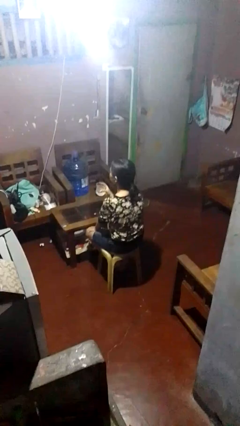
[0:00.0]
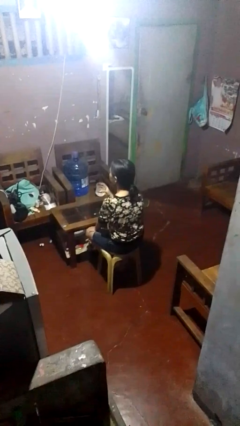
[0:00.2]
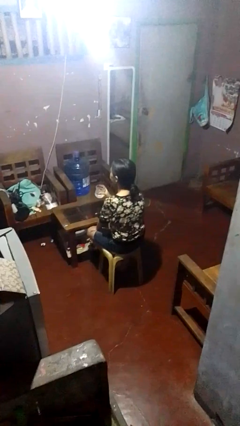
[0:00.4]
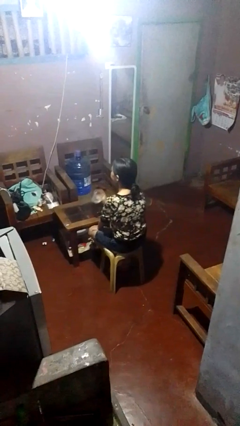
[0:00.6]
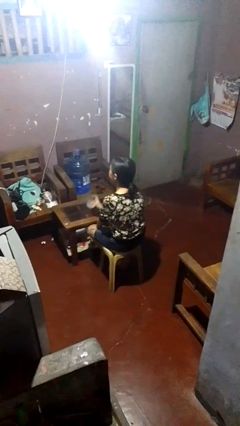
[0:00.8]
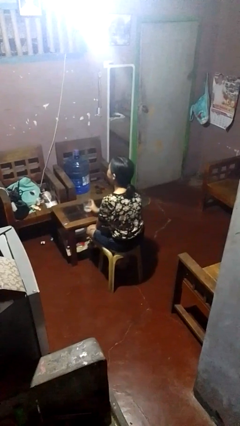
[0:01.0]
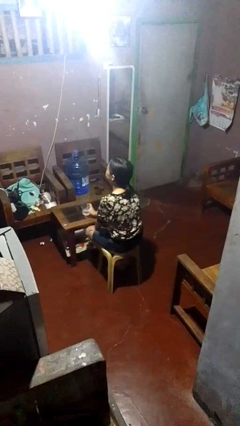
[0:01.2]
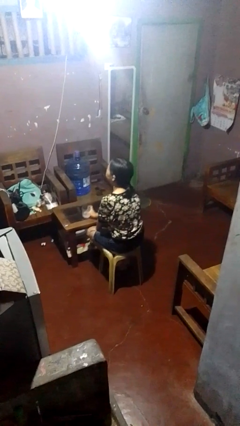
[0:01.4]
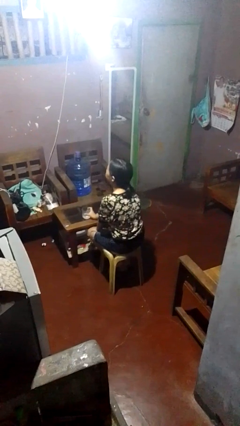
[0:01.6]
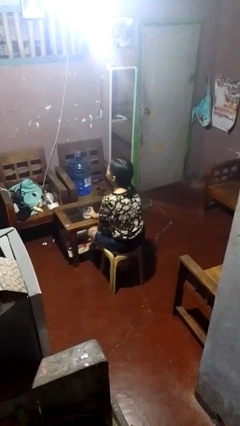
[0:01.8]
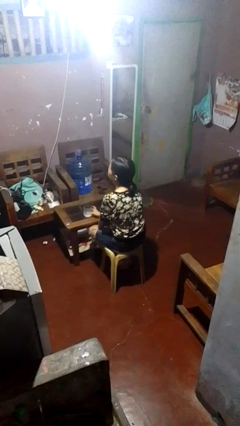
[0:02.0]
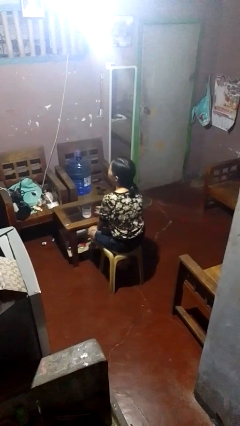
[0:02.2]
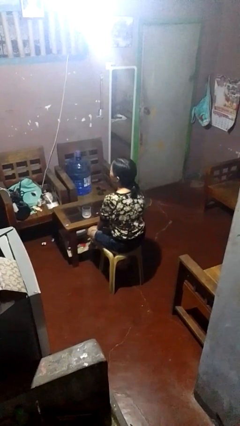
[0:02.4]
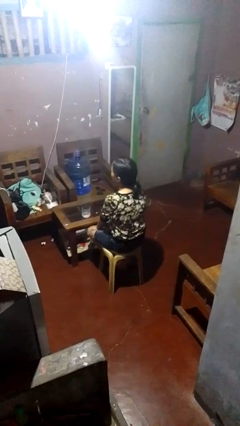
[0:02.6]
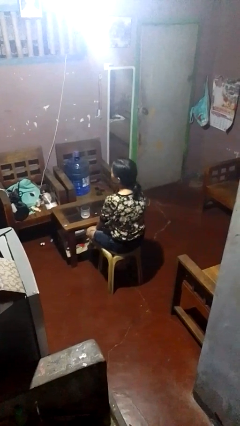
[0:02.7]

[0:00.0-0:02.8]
person puts down object on table

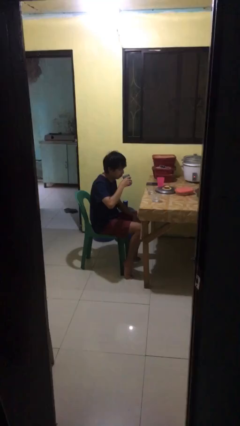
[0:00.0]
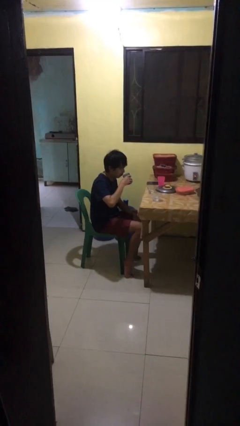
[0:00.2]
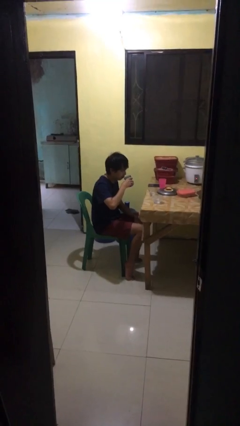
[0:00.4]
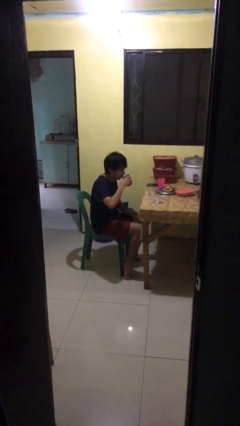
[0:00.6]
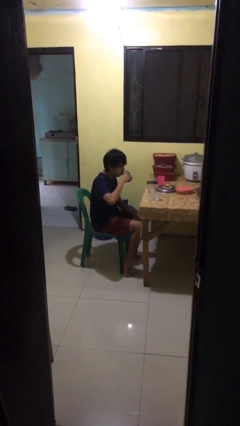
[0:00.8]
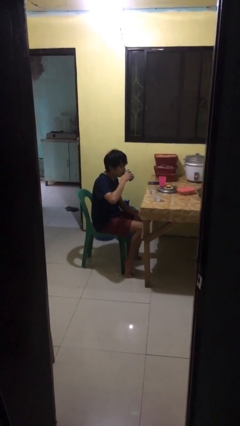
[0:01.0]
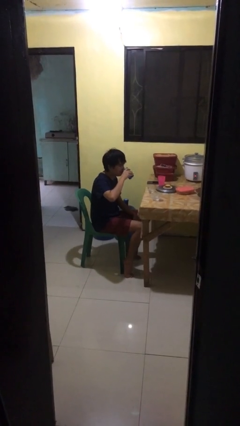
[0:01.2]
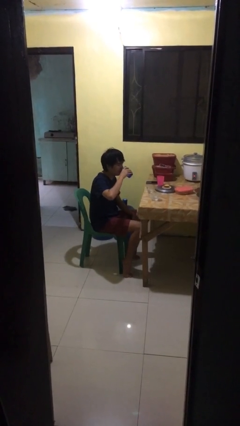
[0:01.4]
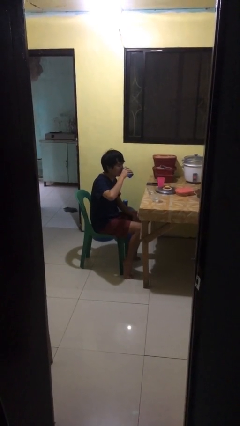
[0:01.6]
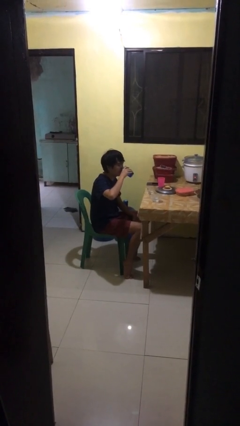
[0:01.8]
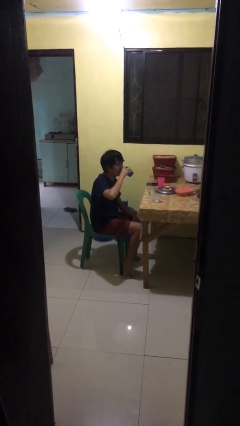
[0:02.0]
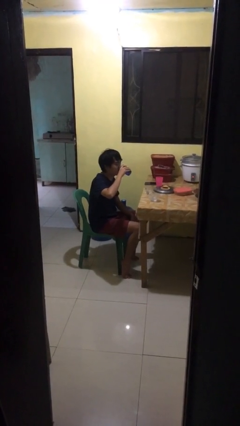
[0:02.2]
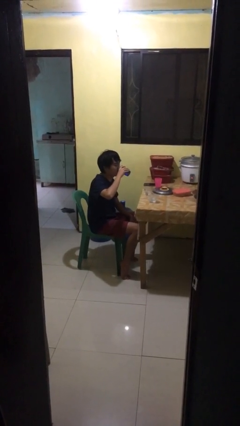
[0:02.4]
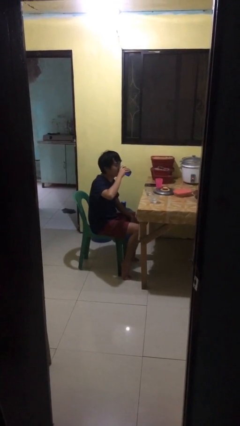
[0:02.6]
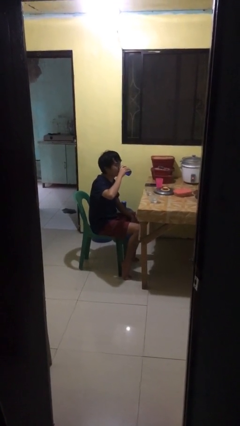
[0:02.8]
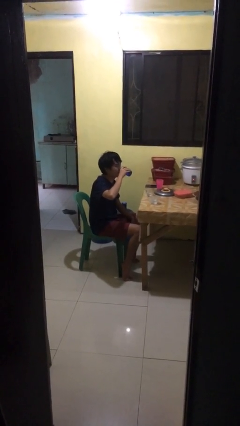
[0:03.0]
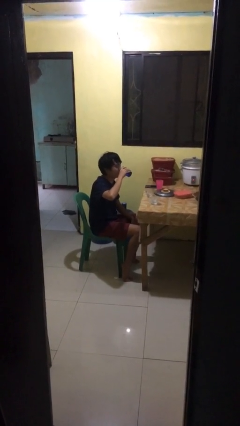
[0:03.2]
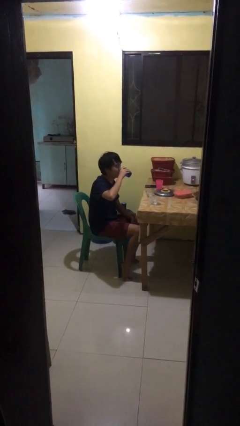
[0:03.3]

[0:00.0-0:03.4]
person drinks from shotglass

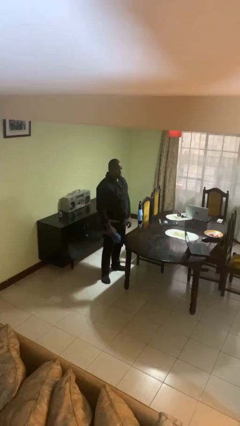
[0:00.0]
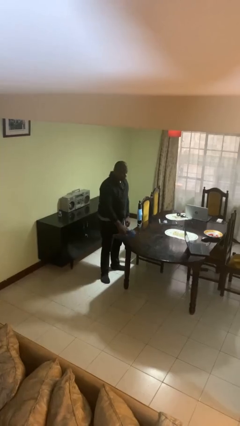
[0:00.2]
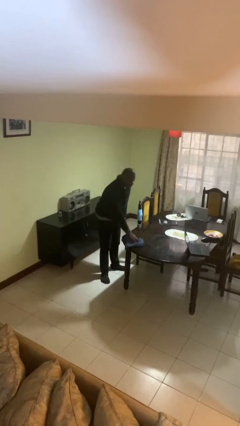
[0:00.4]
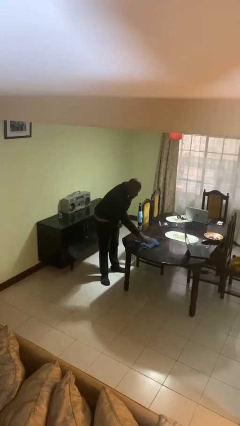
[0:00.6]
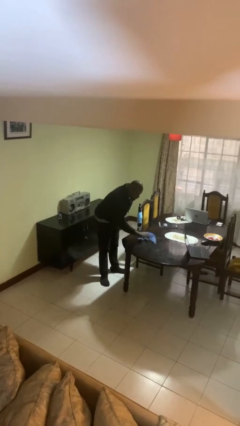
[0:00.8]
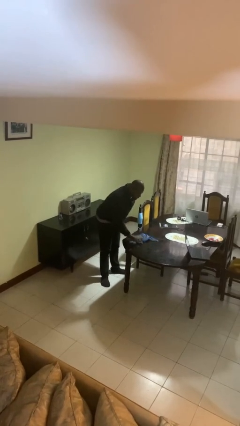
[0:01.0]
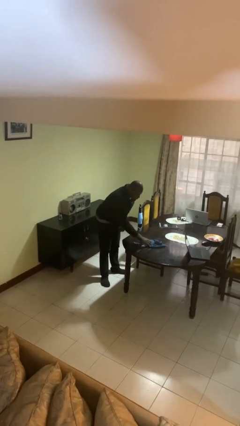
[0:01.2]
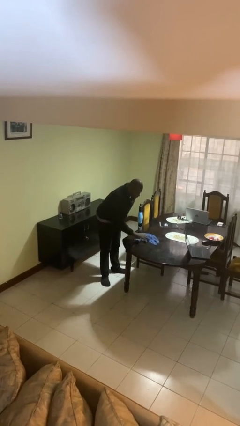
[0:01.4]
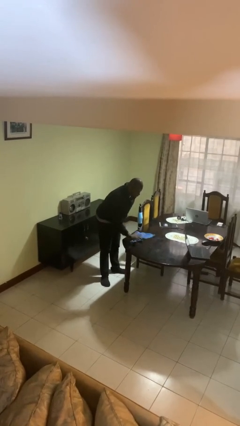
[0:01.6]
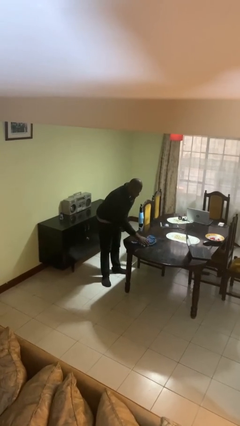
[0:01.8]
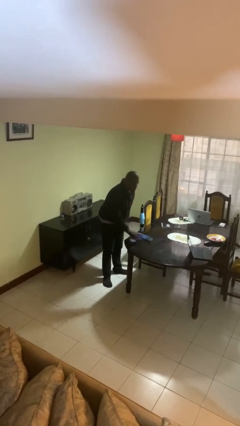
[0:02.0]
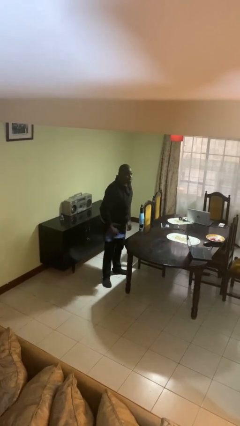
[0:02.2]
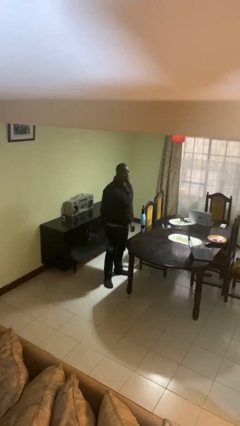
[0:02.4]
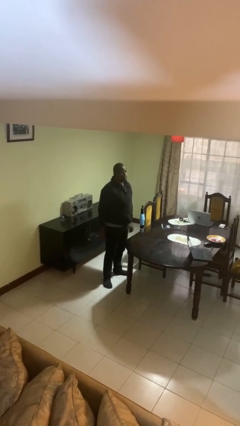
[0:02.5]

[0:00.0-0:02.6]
person cleans table with rag

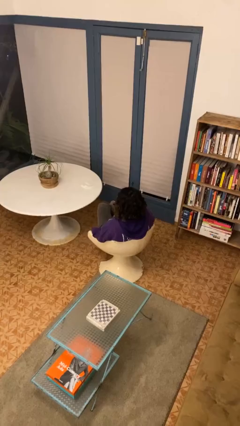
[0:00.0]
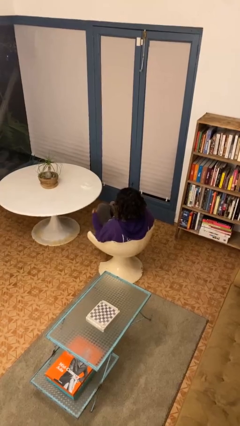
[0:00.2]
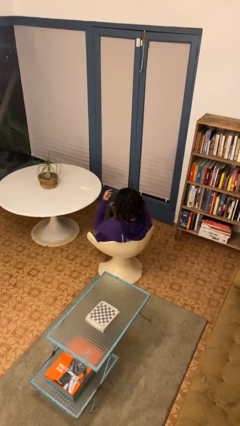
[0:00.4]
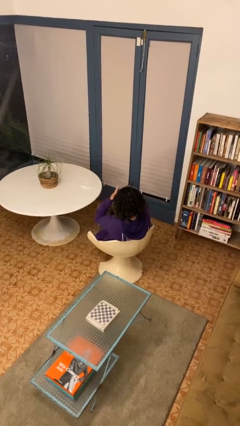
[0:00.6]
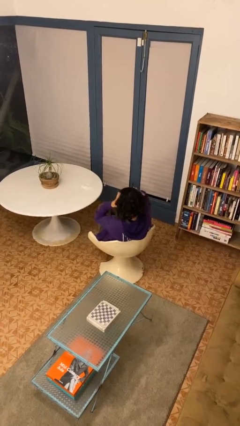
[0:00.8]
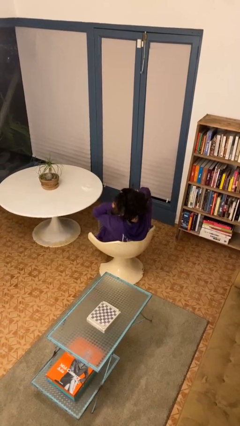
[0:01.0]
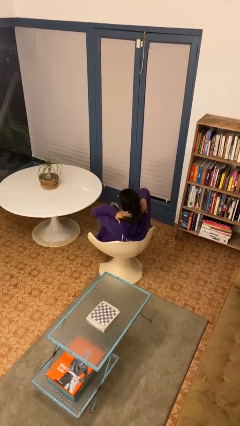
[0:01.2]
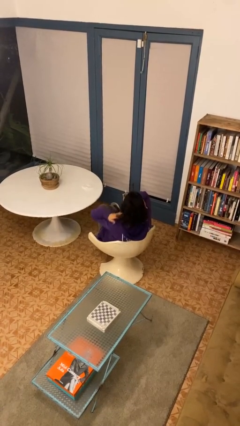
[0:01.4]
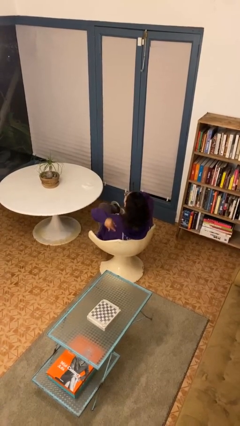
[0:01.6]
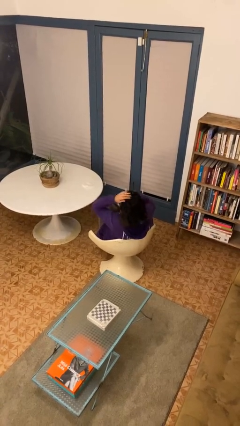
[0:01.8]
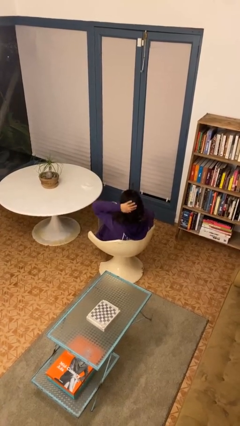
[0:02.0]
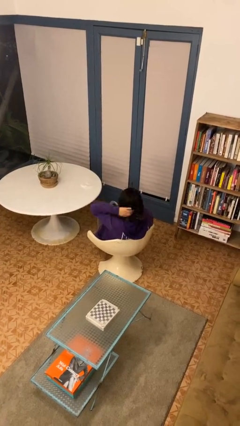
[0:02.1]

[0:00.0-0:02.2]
person strokes hair

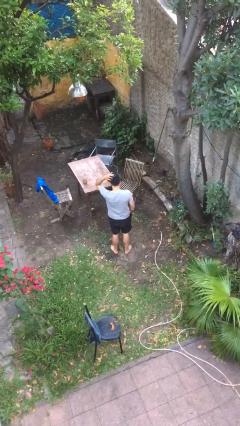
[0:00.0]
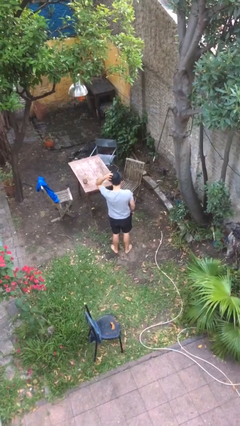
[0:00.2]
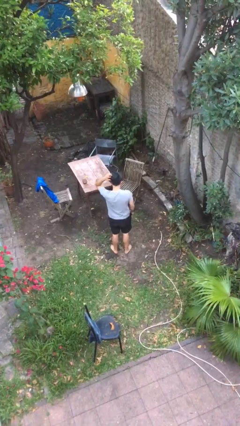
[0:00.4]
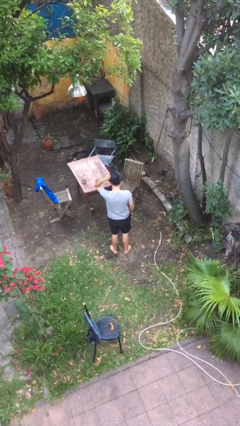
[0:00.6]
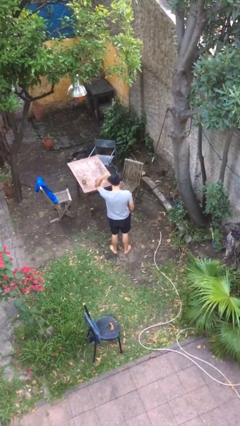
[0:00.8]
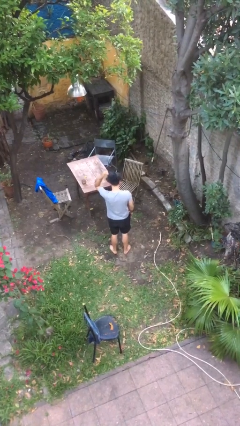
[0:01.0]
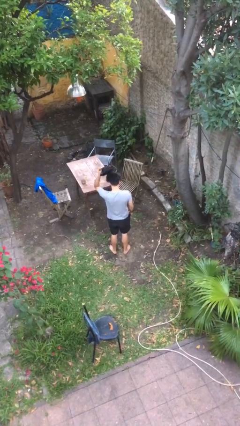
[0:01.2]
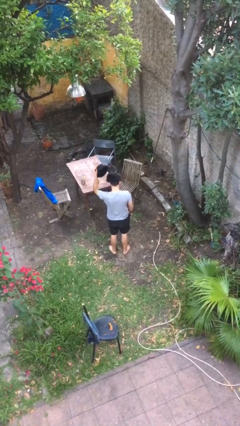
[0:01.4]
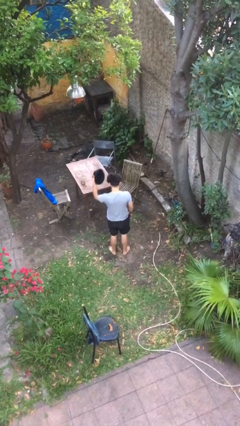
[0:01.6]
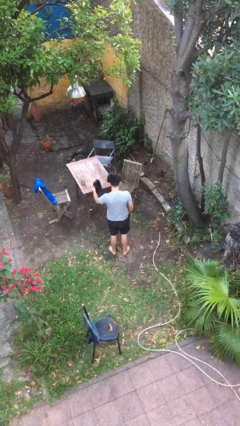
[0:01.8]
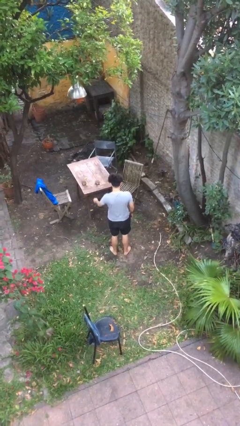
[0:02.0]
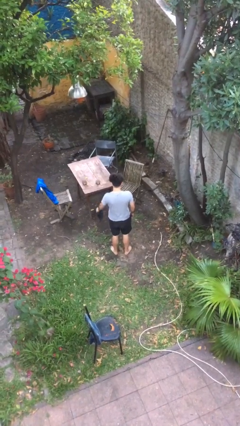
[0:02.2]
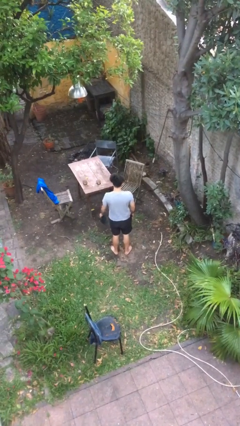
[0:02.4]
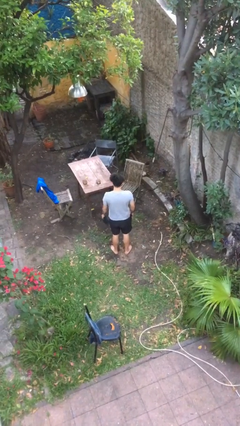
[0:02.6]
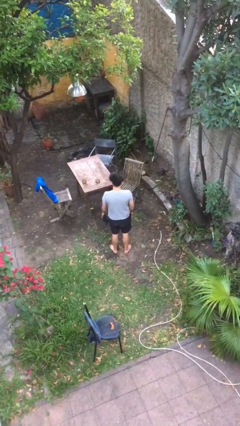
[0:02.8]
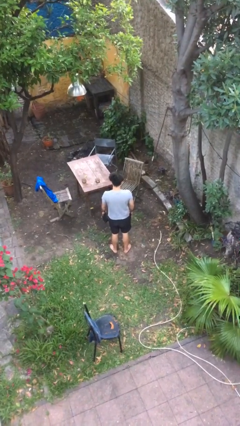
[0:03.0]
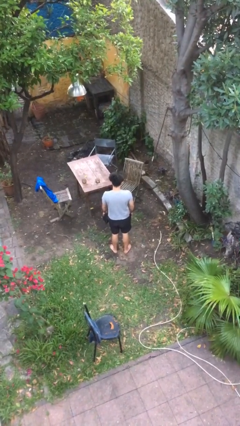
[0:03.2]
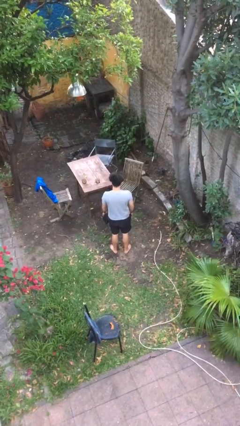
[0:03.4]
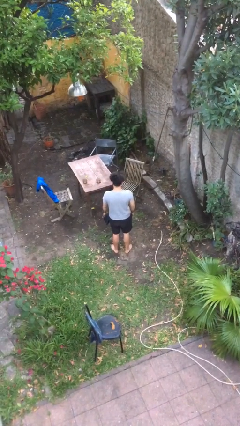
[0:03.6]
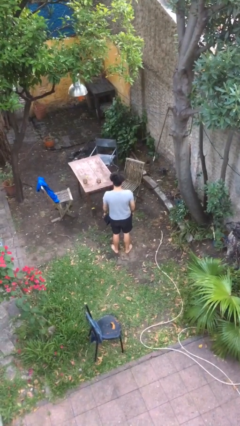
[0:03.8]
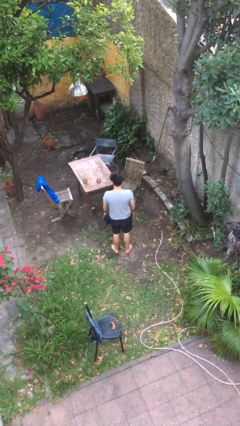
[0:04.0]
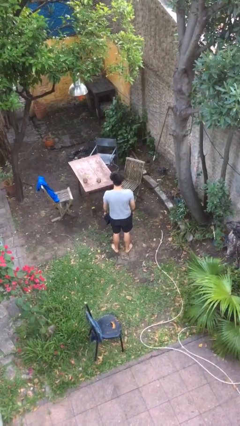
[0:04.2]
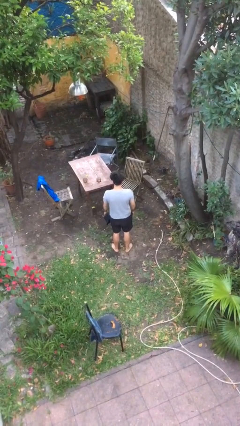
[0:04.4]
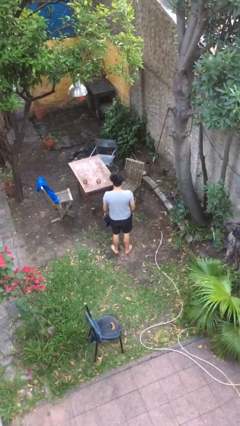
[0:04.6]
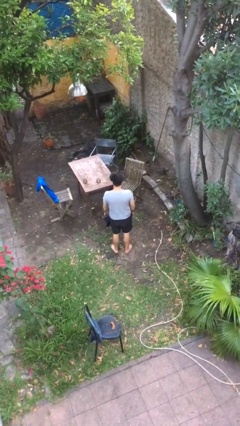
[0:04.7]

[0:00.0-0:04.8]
person takes off hat

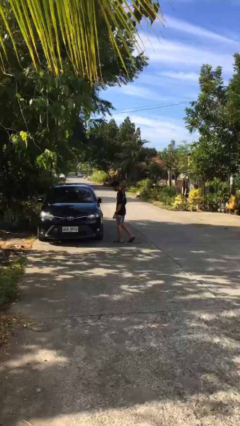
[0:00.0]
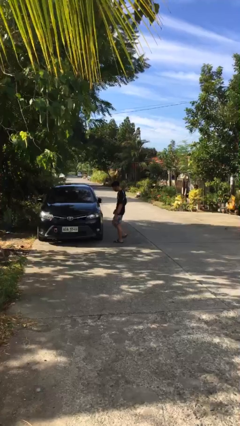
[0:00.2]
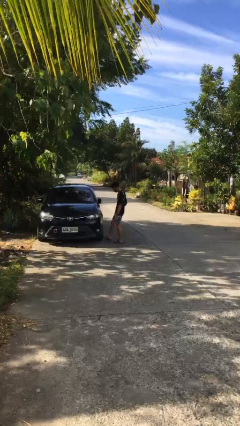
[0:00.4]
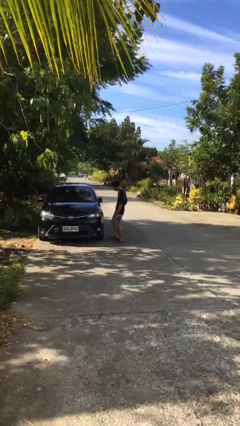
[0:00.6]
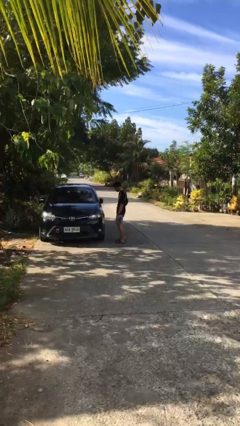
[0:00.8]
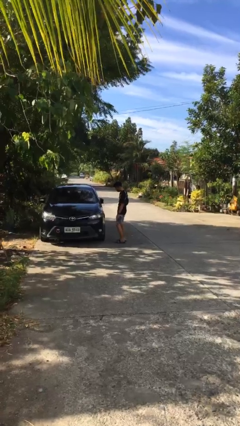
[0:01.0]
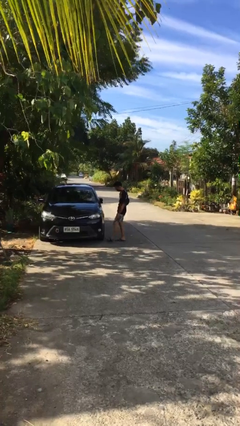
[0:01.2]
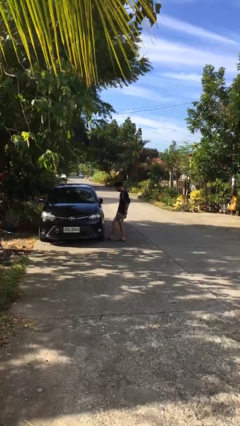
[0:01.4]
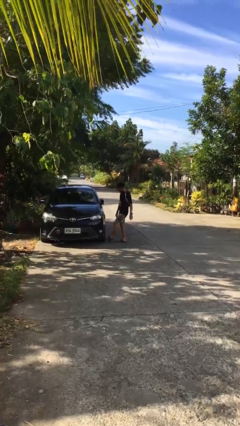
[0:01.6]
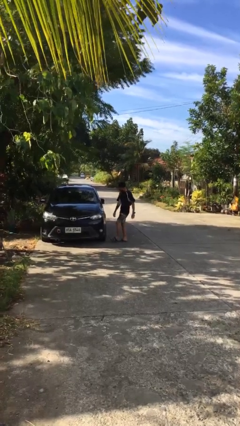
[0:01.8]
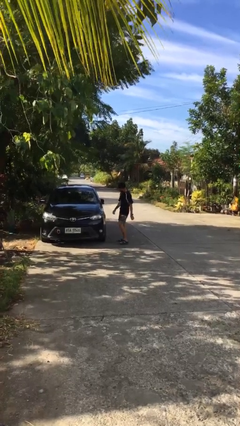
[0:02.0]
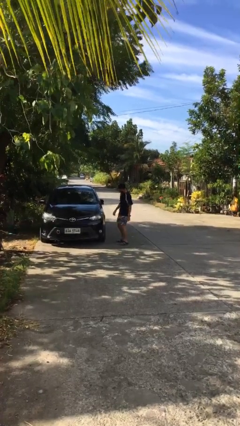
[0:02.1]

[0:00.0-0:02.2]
person kicks car tires
